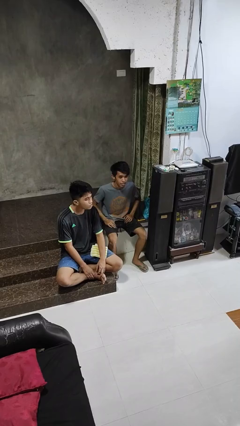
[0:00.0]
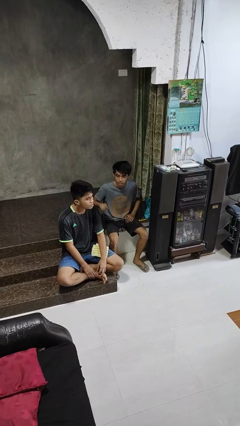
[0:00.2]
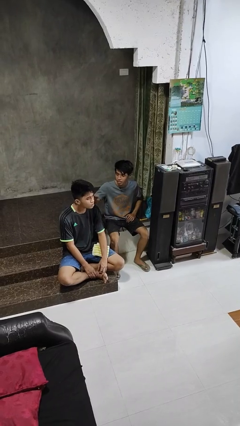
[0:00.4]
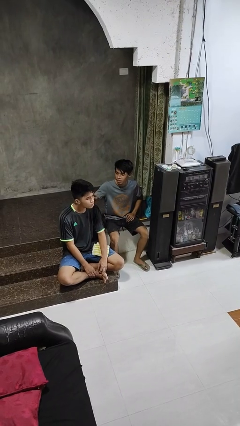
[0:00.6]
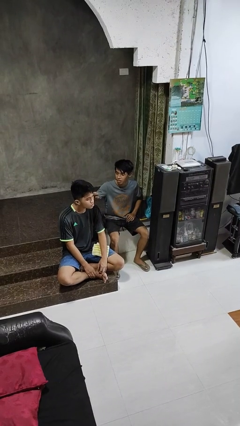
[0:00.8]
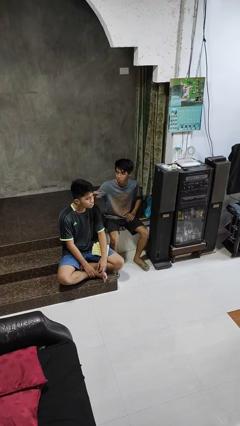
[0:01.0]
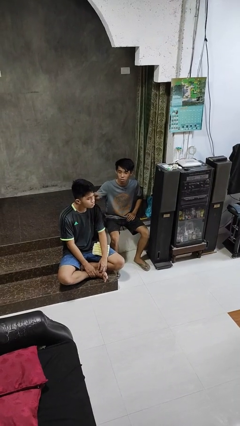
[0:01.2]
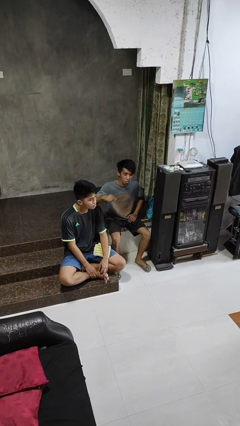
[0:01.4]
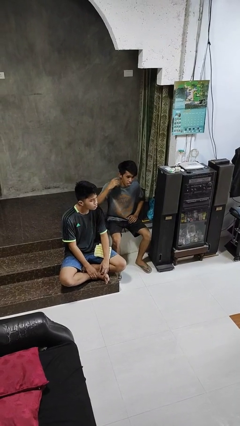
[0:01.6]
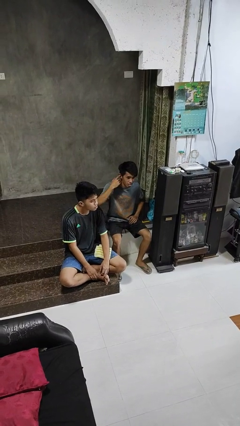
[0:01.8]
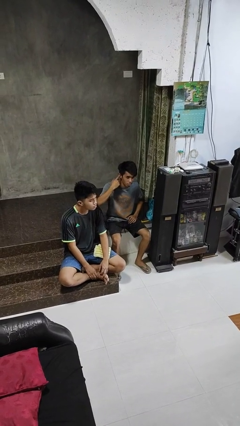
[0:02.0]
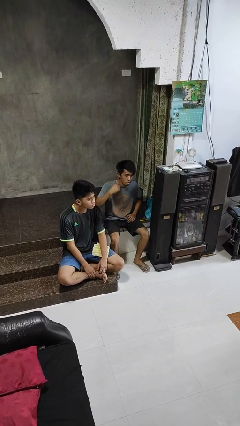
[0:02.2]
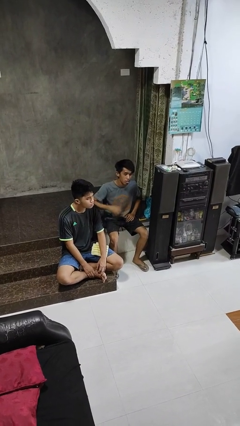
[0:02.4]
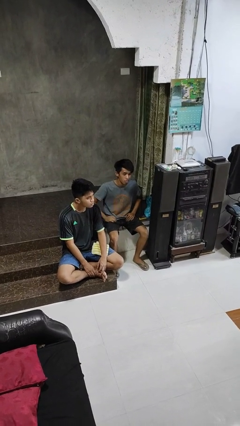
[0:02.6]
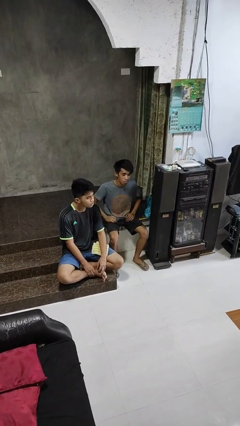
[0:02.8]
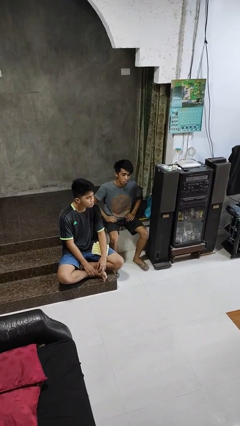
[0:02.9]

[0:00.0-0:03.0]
person touches face of person

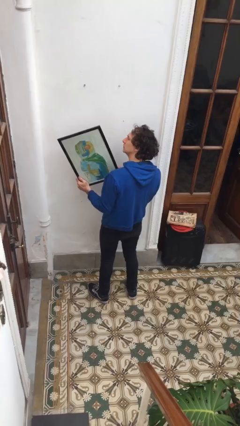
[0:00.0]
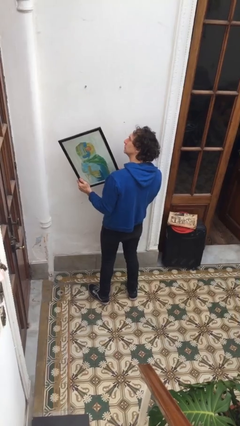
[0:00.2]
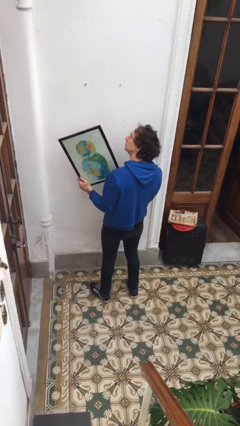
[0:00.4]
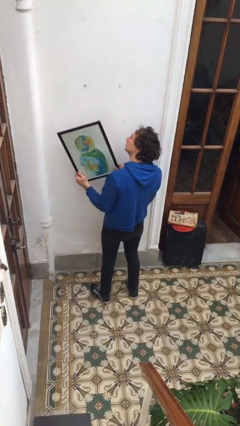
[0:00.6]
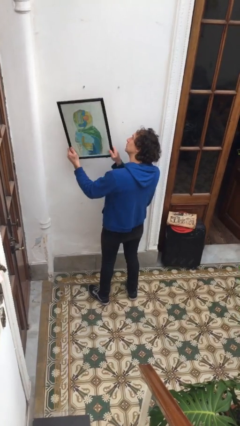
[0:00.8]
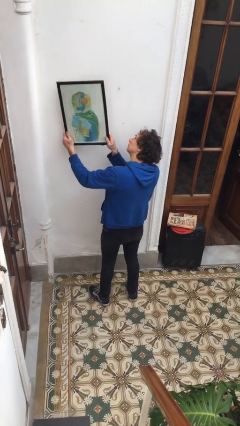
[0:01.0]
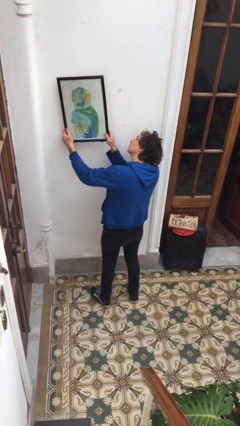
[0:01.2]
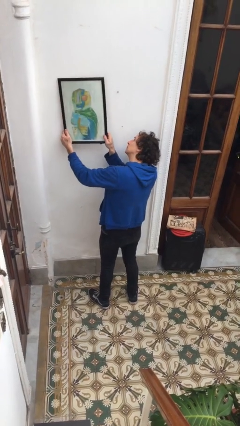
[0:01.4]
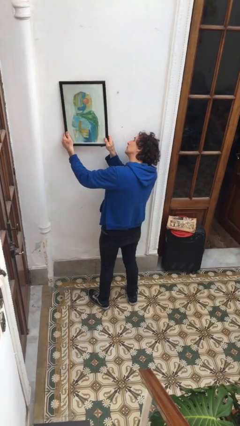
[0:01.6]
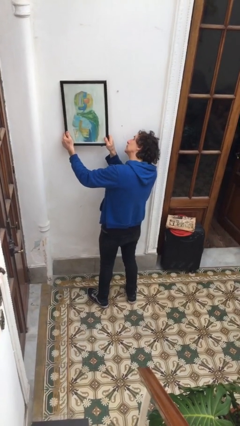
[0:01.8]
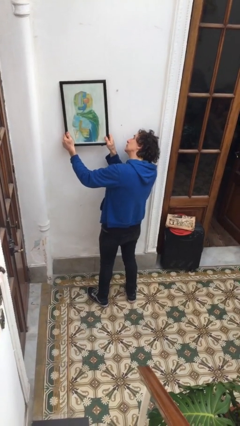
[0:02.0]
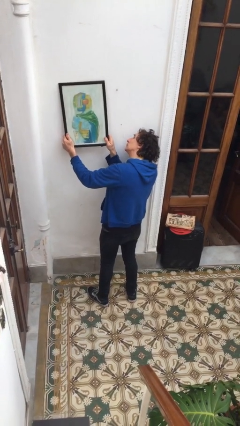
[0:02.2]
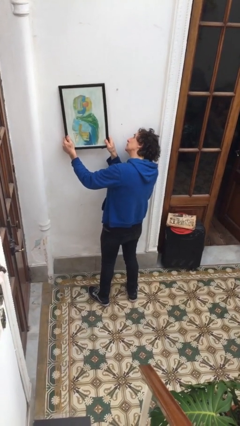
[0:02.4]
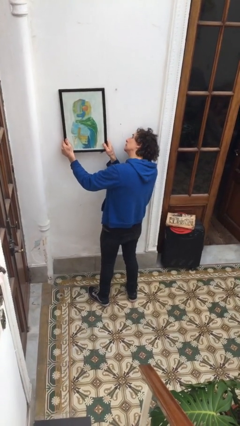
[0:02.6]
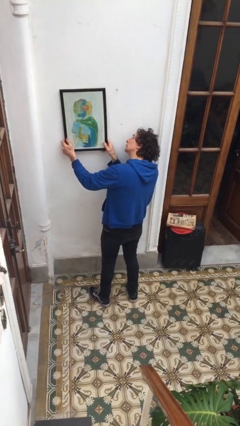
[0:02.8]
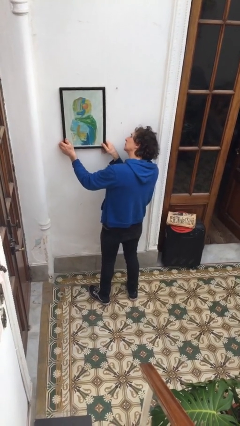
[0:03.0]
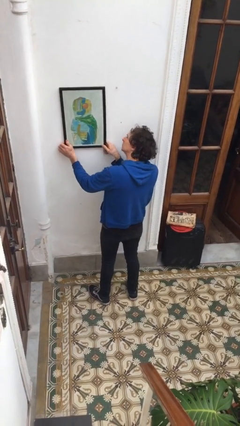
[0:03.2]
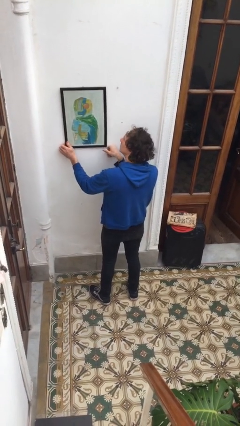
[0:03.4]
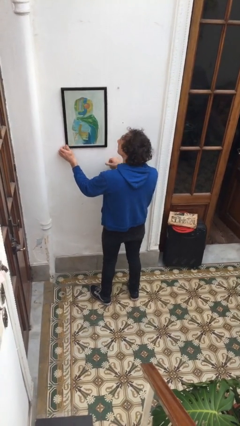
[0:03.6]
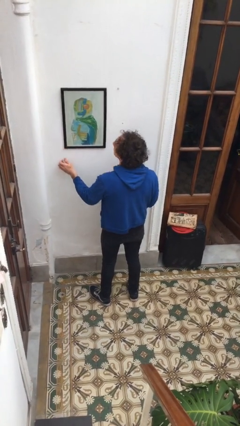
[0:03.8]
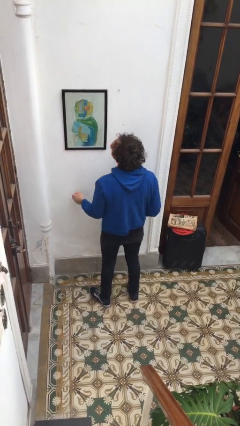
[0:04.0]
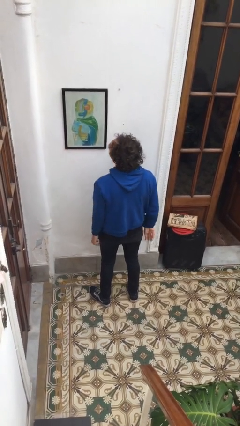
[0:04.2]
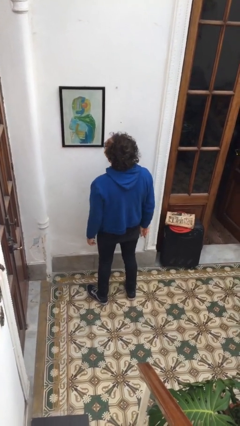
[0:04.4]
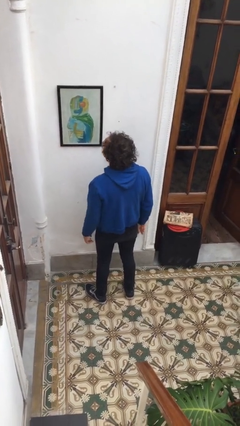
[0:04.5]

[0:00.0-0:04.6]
person puts up picture frame

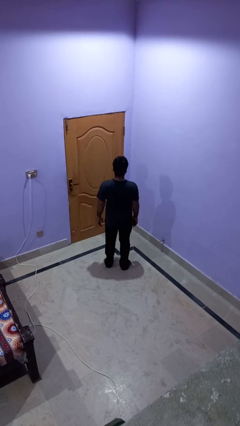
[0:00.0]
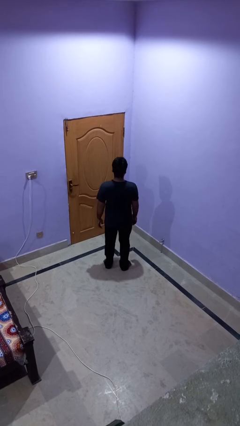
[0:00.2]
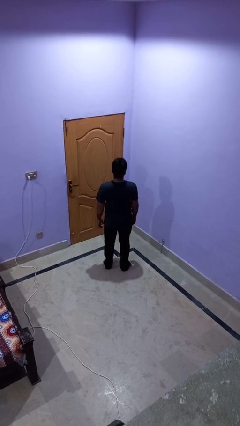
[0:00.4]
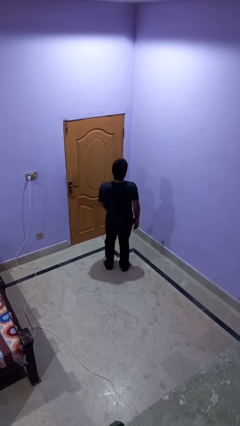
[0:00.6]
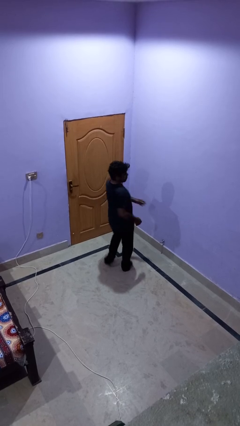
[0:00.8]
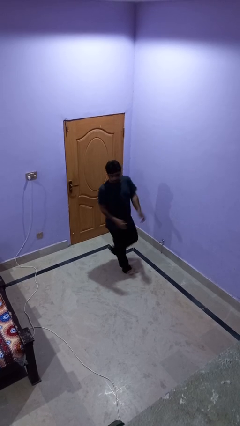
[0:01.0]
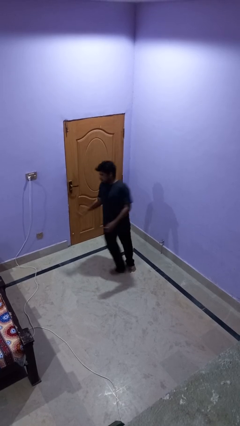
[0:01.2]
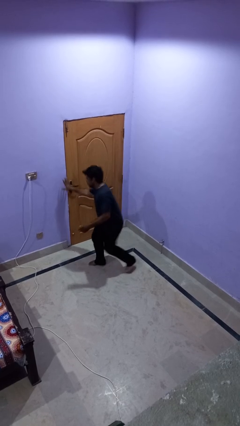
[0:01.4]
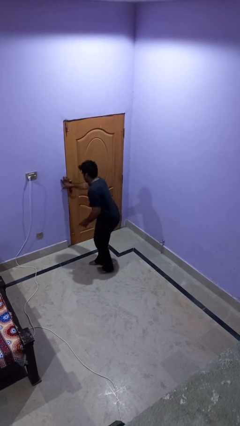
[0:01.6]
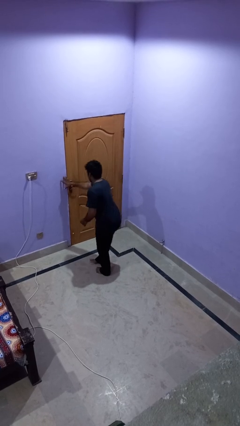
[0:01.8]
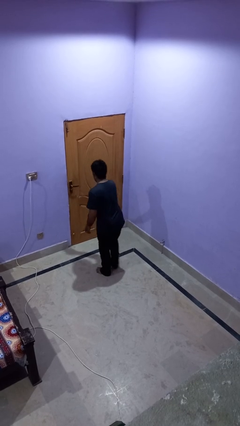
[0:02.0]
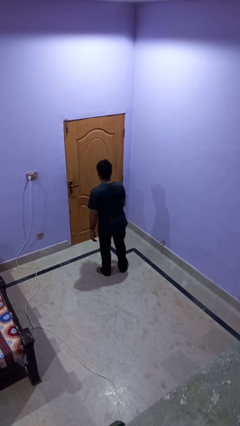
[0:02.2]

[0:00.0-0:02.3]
person twirls

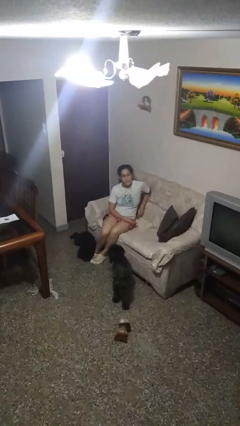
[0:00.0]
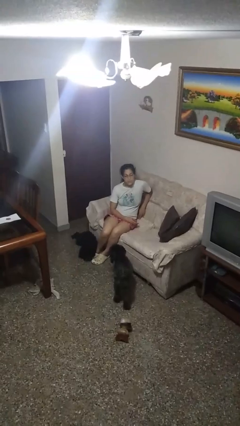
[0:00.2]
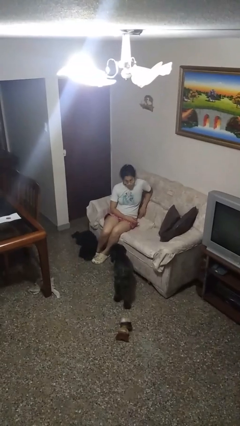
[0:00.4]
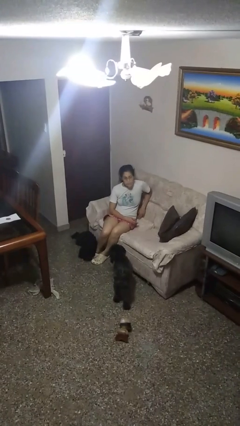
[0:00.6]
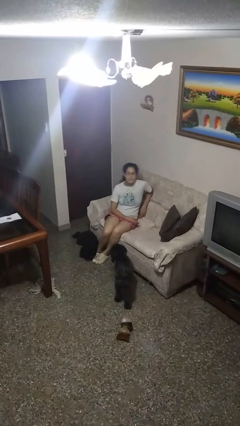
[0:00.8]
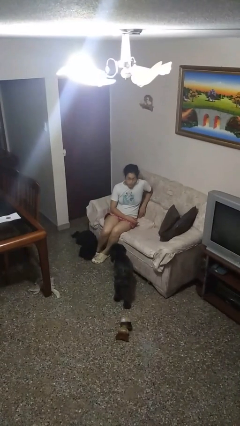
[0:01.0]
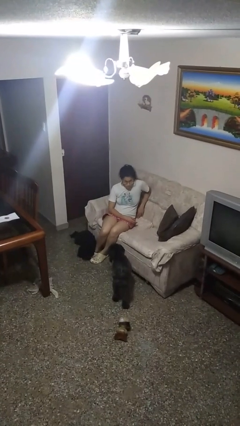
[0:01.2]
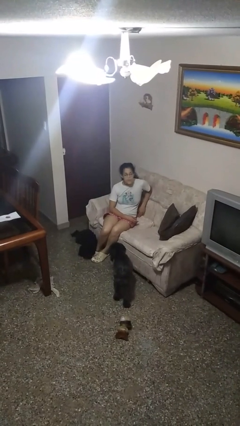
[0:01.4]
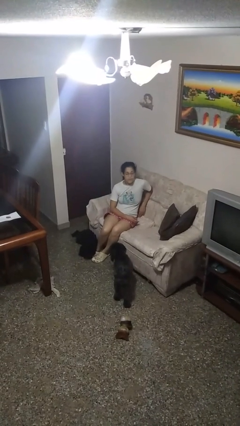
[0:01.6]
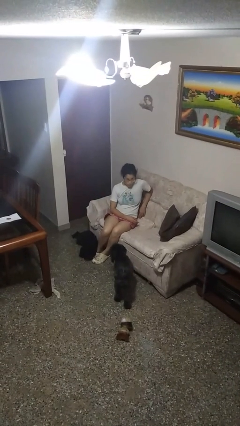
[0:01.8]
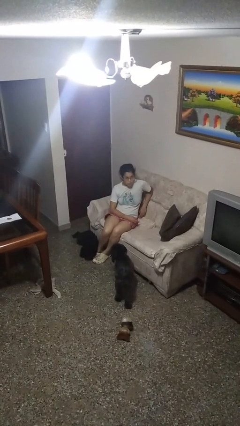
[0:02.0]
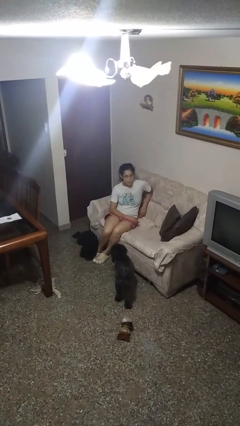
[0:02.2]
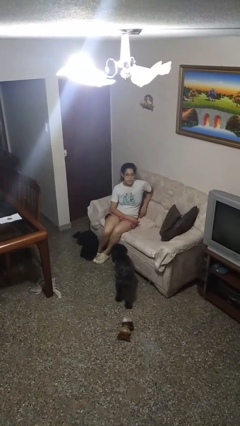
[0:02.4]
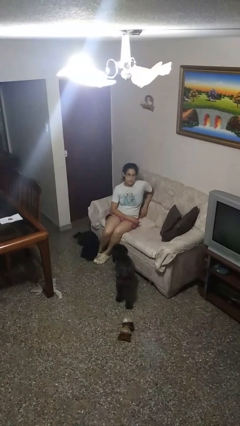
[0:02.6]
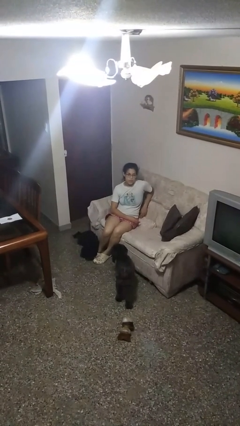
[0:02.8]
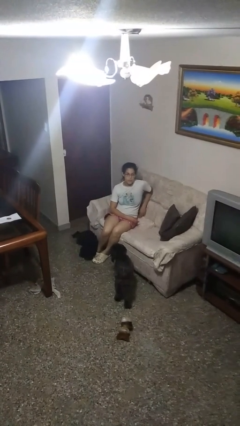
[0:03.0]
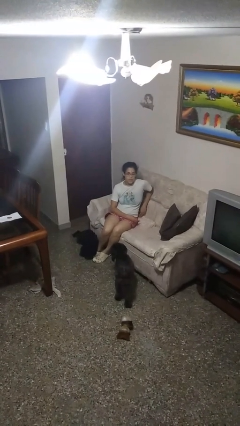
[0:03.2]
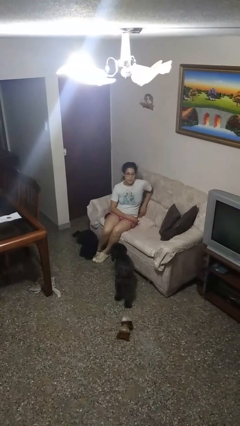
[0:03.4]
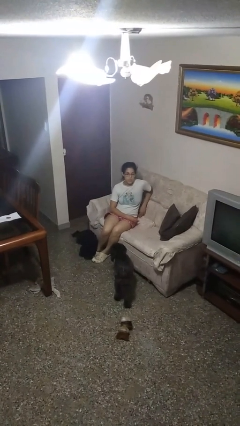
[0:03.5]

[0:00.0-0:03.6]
person nods head

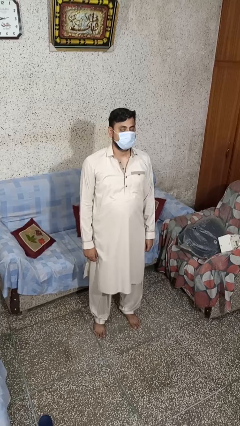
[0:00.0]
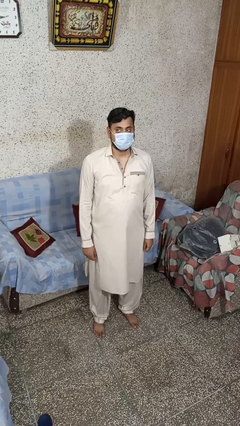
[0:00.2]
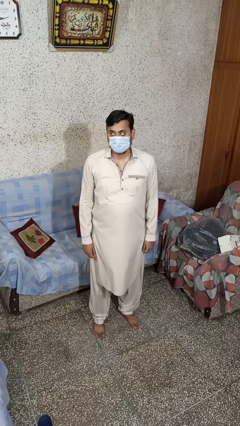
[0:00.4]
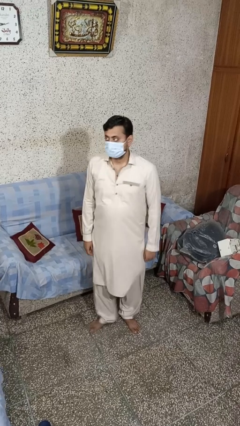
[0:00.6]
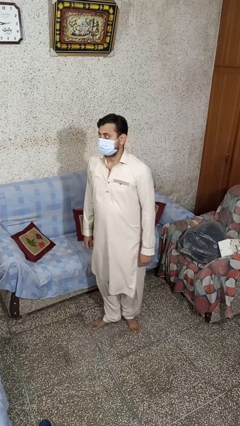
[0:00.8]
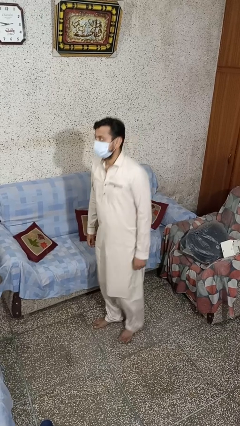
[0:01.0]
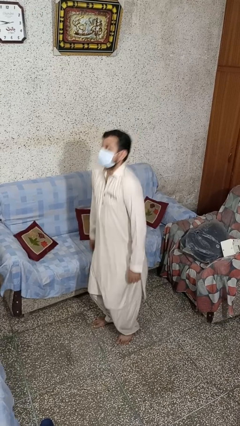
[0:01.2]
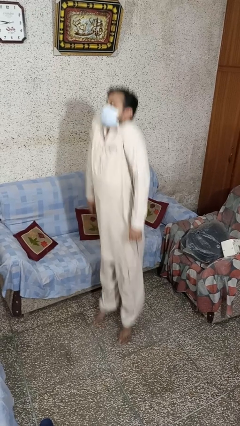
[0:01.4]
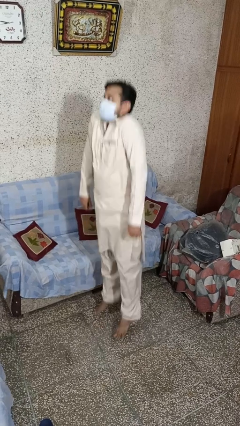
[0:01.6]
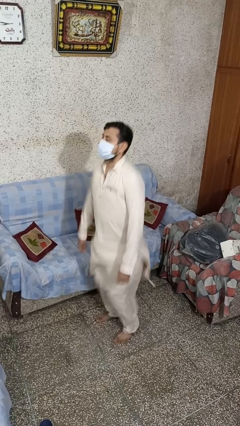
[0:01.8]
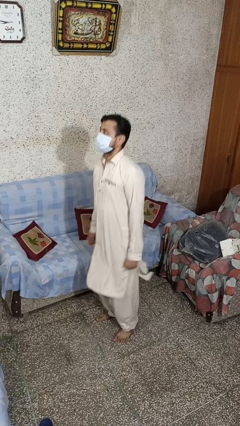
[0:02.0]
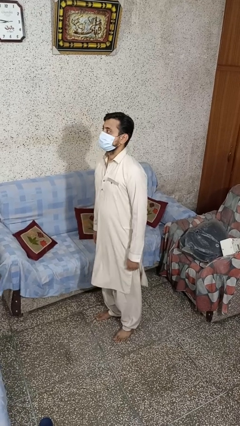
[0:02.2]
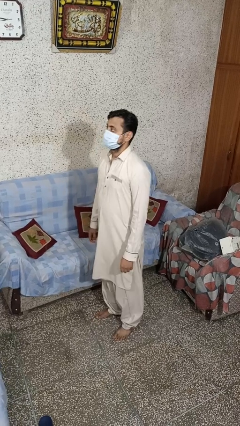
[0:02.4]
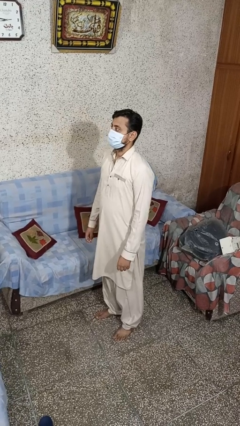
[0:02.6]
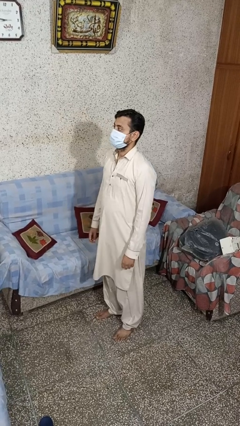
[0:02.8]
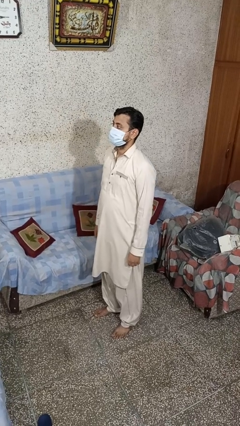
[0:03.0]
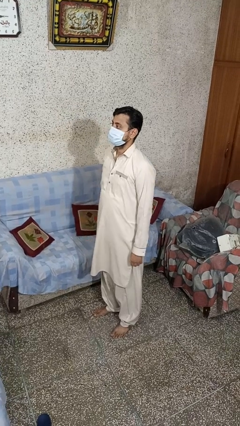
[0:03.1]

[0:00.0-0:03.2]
person jumps

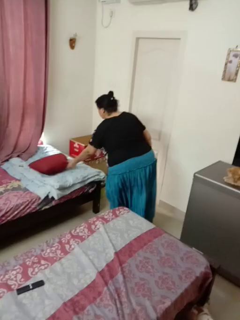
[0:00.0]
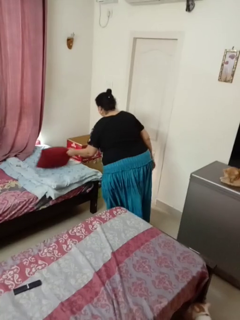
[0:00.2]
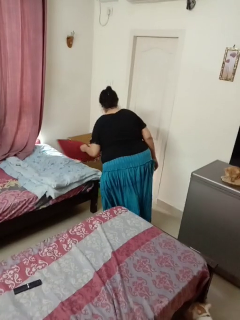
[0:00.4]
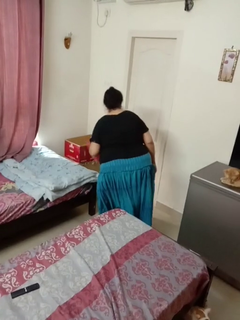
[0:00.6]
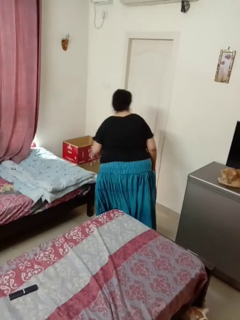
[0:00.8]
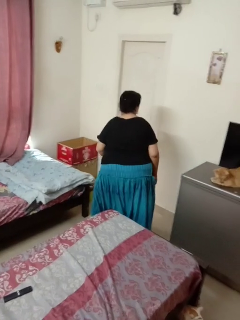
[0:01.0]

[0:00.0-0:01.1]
person picks up object from bed
